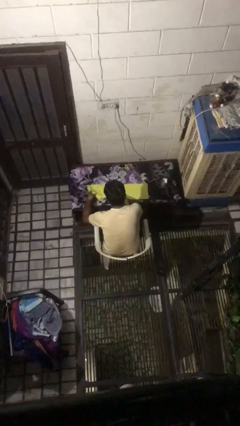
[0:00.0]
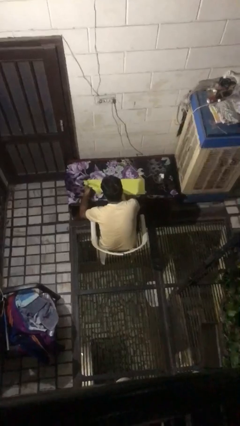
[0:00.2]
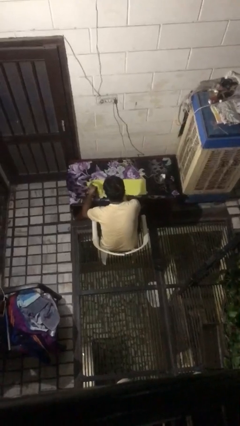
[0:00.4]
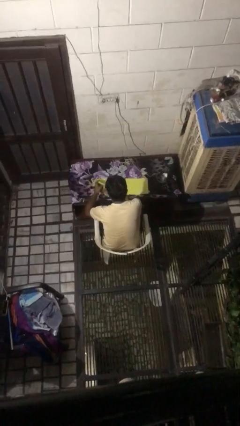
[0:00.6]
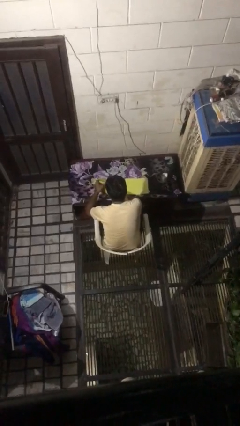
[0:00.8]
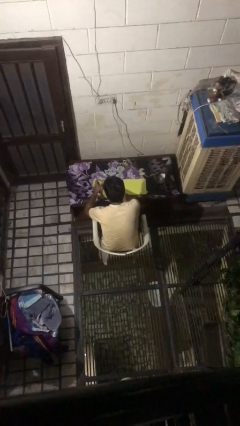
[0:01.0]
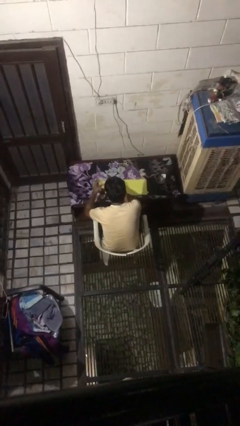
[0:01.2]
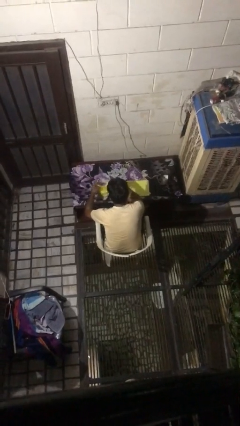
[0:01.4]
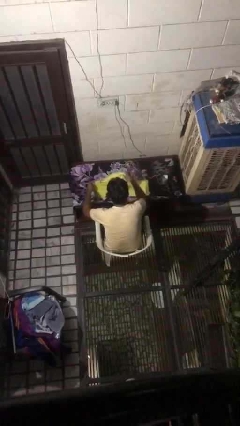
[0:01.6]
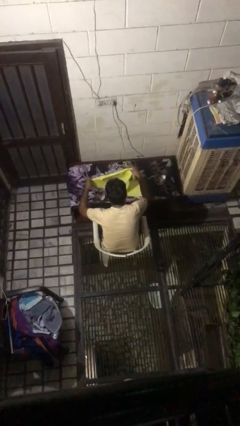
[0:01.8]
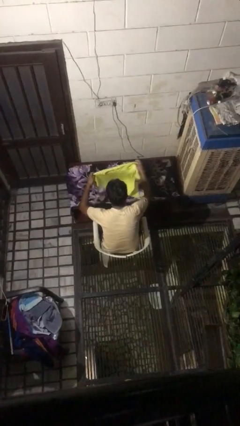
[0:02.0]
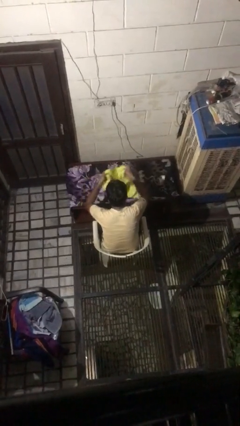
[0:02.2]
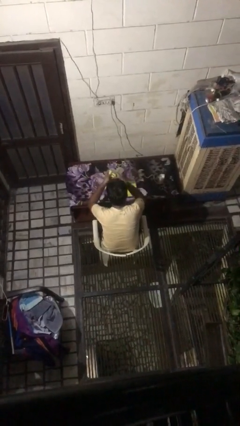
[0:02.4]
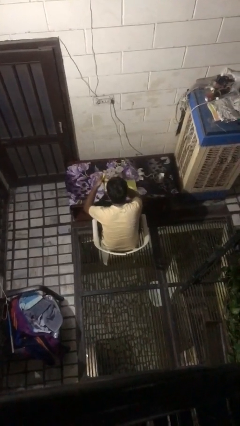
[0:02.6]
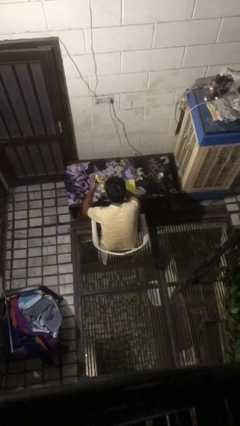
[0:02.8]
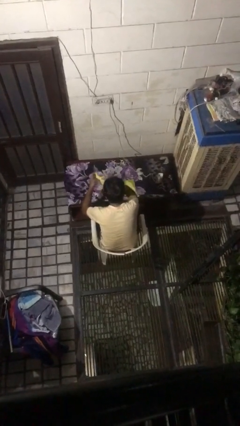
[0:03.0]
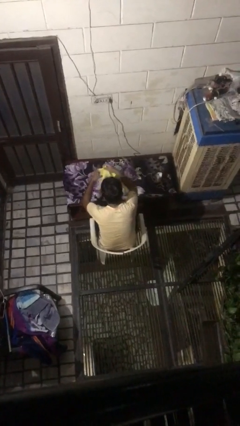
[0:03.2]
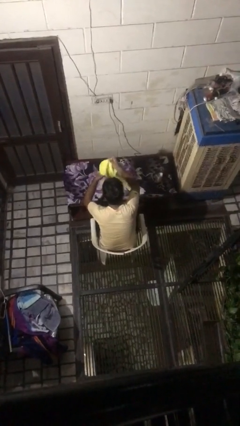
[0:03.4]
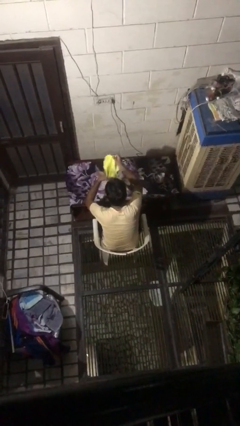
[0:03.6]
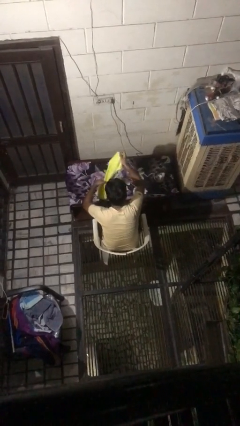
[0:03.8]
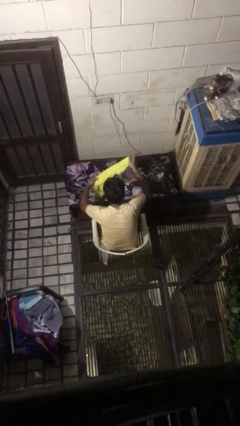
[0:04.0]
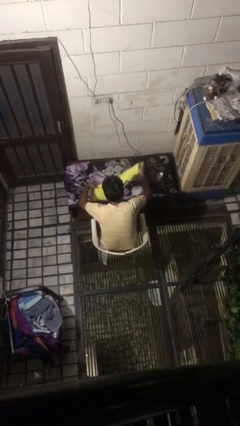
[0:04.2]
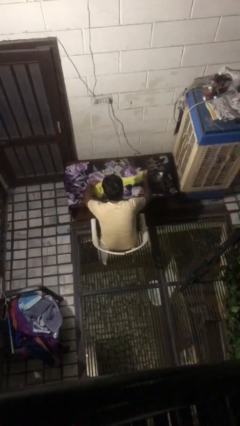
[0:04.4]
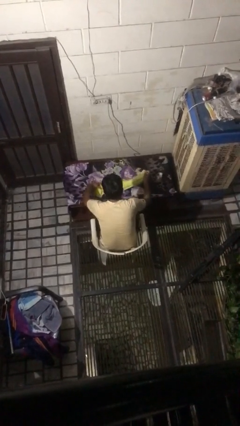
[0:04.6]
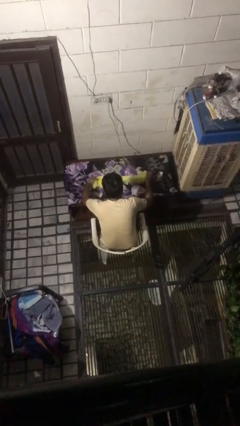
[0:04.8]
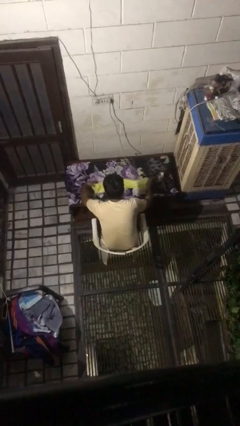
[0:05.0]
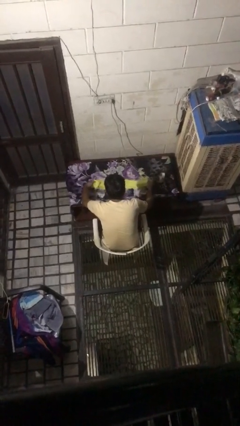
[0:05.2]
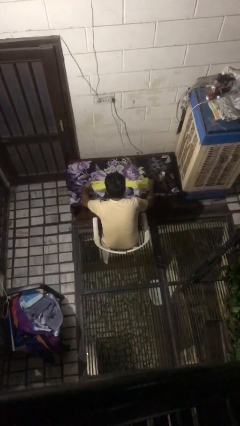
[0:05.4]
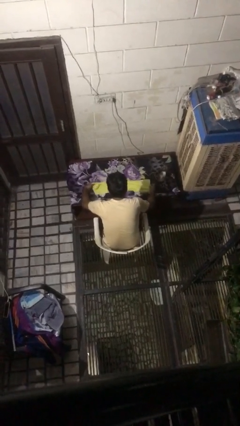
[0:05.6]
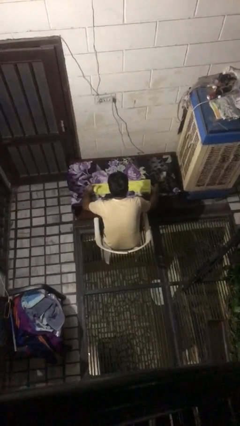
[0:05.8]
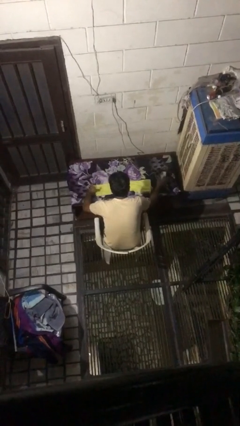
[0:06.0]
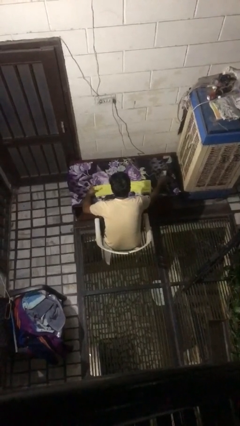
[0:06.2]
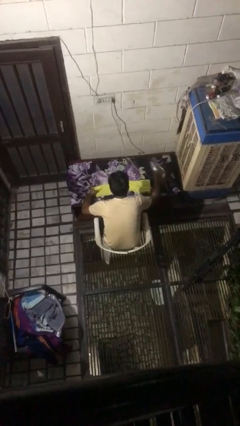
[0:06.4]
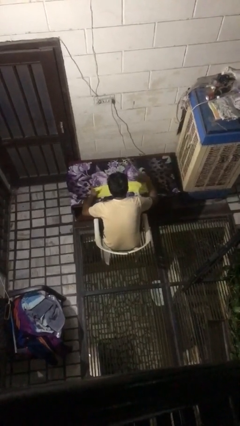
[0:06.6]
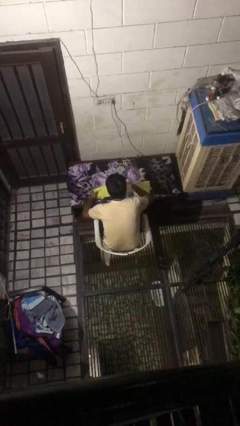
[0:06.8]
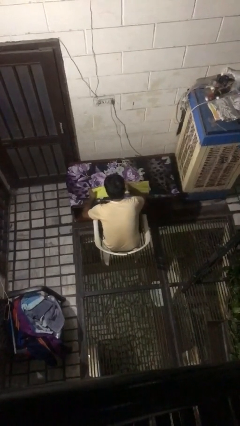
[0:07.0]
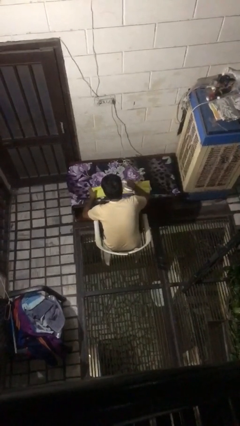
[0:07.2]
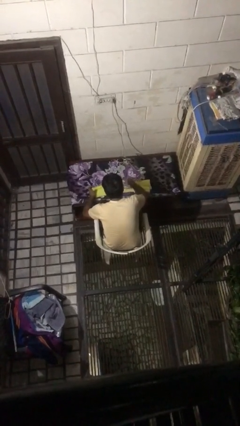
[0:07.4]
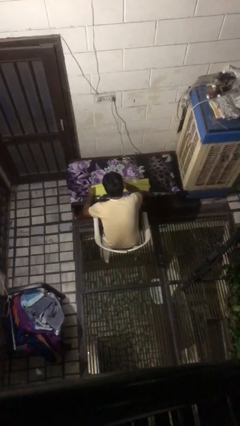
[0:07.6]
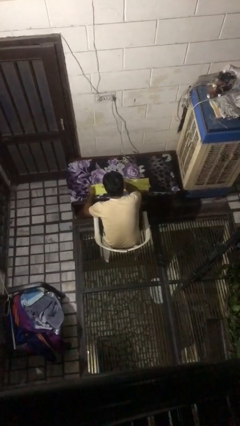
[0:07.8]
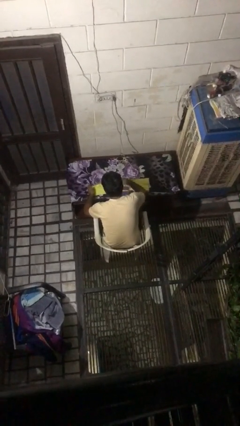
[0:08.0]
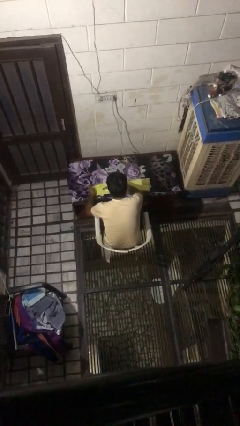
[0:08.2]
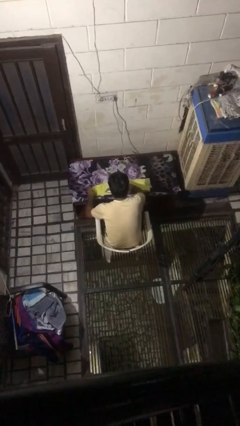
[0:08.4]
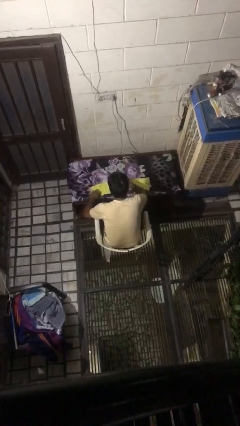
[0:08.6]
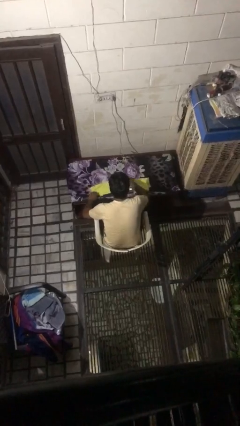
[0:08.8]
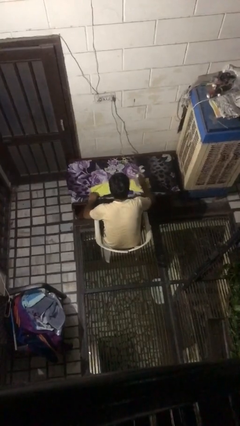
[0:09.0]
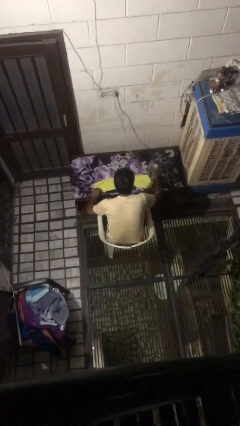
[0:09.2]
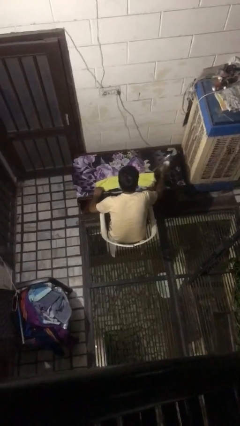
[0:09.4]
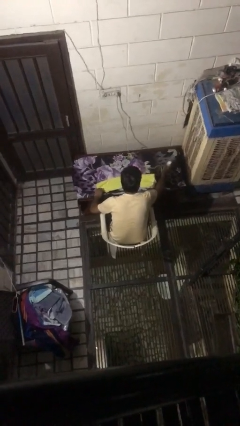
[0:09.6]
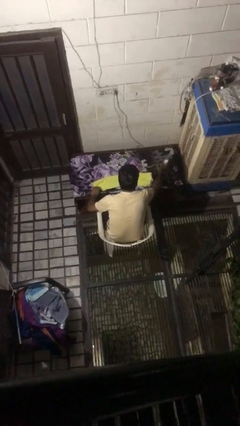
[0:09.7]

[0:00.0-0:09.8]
person irons clothes

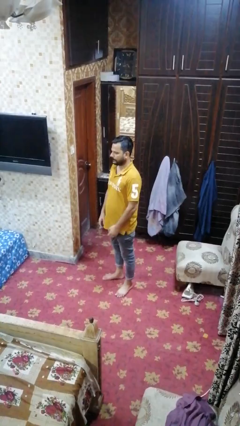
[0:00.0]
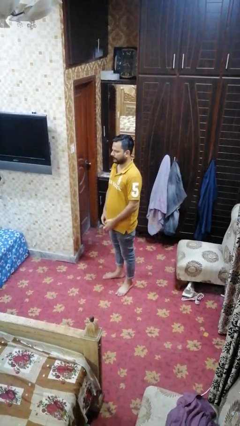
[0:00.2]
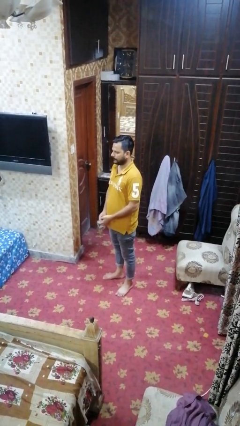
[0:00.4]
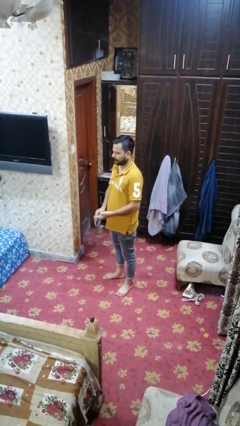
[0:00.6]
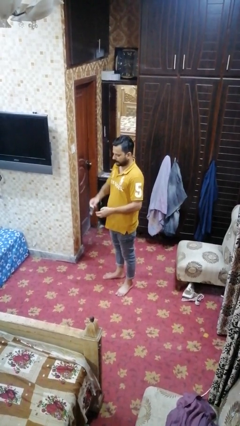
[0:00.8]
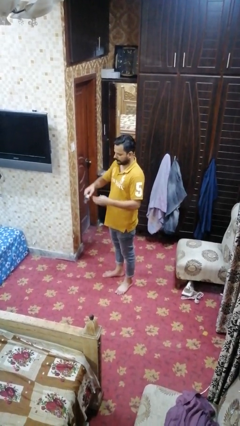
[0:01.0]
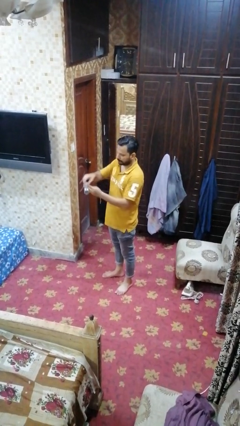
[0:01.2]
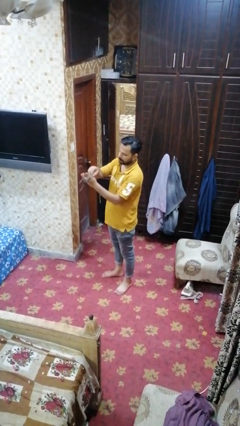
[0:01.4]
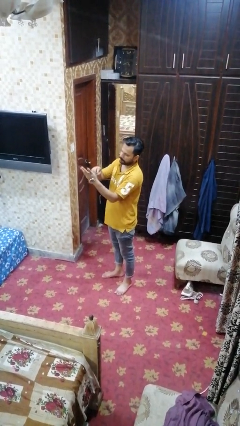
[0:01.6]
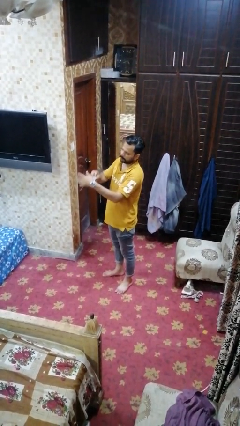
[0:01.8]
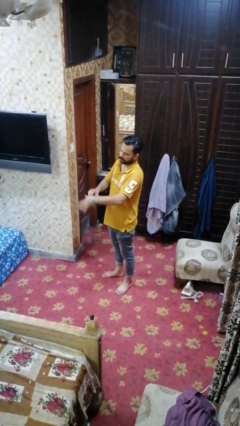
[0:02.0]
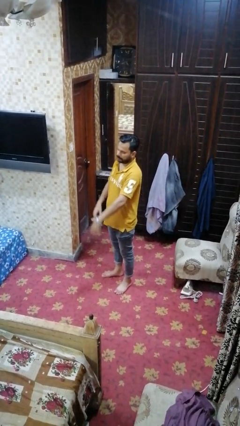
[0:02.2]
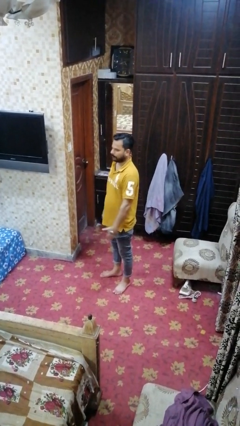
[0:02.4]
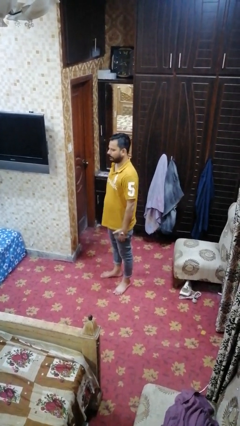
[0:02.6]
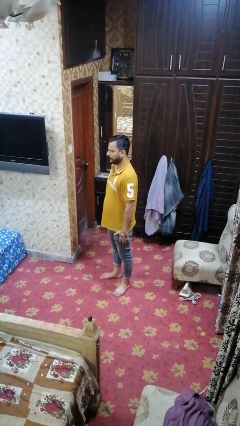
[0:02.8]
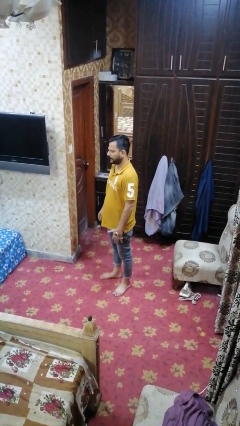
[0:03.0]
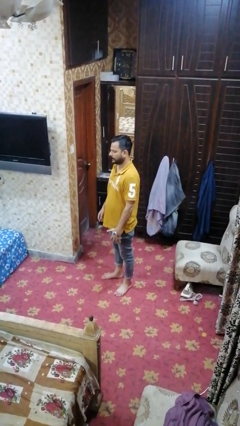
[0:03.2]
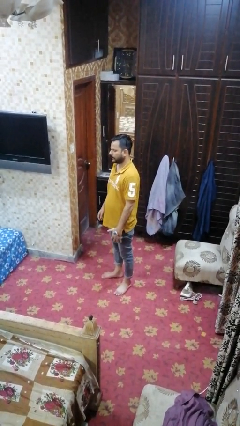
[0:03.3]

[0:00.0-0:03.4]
person puts on wristwatch

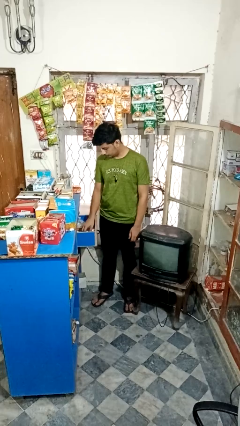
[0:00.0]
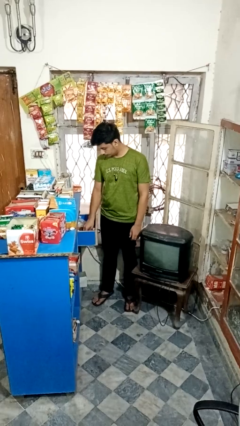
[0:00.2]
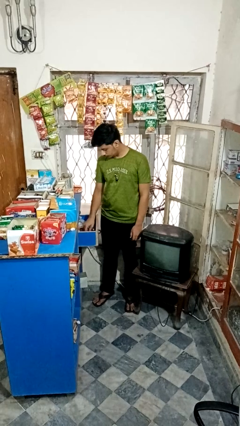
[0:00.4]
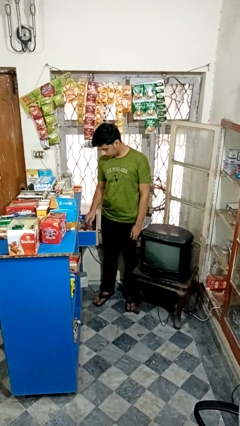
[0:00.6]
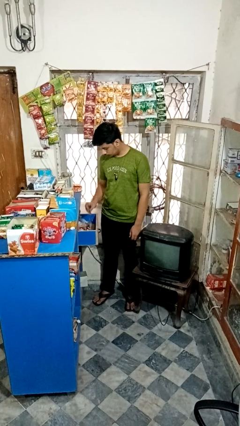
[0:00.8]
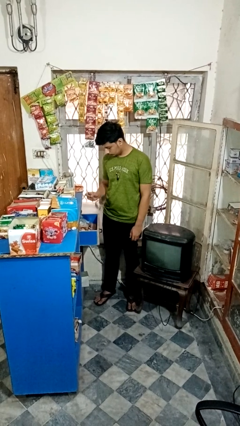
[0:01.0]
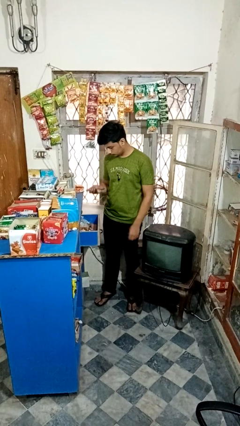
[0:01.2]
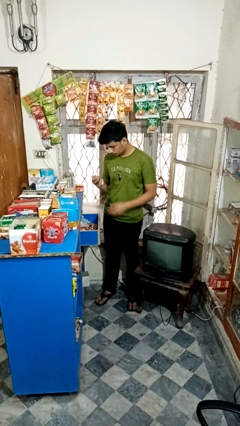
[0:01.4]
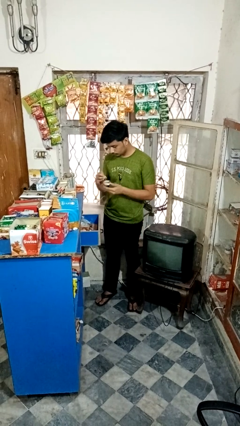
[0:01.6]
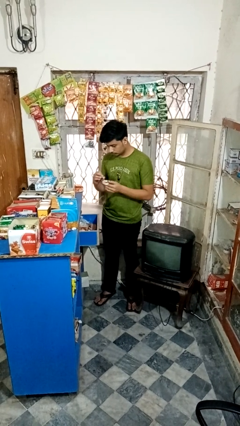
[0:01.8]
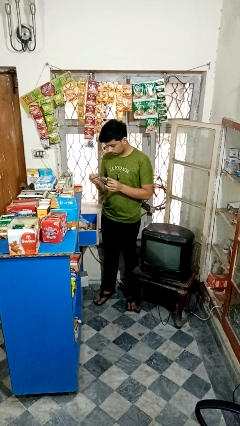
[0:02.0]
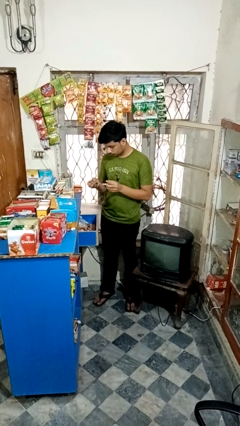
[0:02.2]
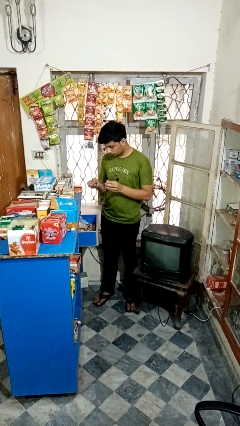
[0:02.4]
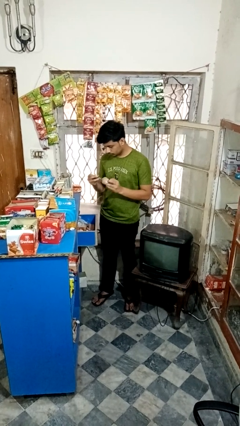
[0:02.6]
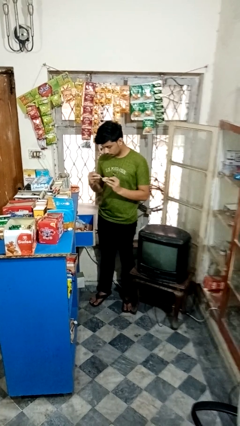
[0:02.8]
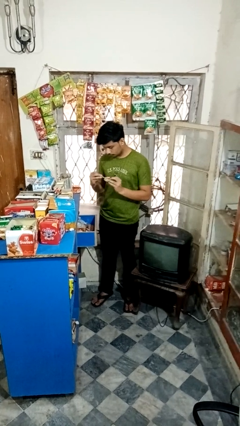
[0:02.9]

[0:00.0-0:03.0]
person searches in kitchen drawer

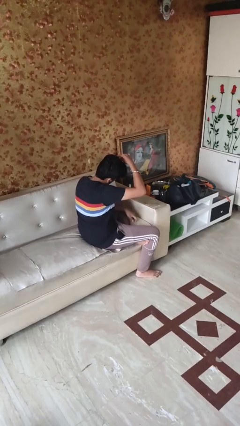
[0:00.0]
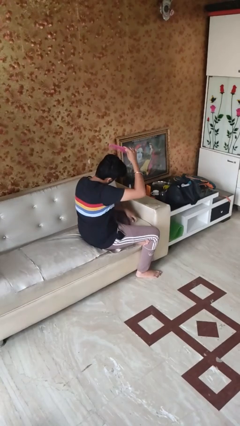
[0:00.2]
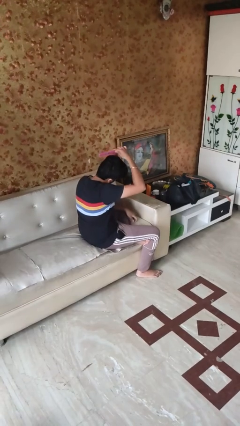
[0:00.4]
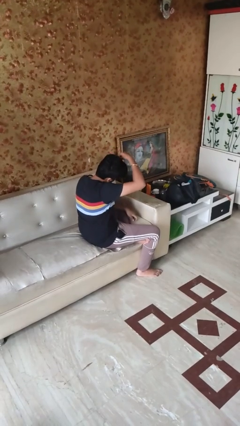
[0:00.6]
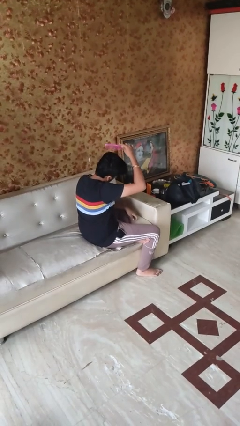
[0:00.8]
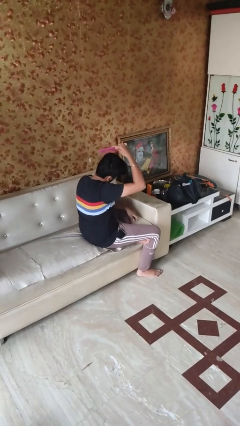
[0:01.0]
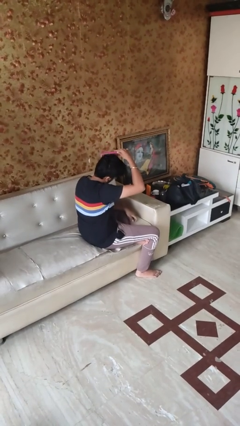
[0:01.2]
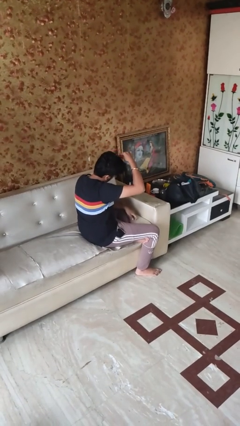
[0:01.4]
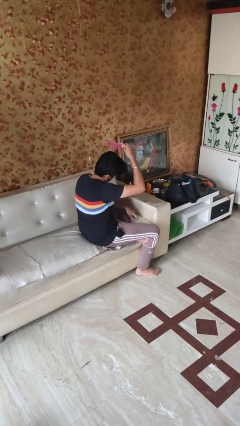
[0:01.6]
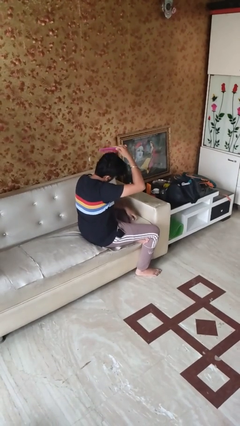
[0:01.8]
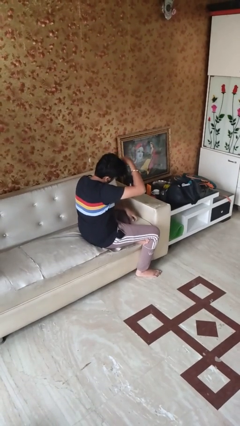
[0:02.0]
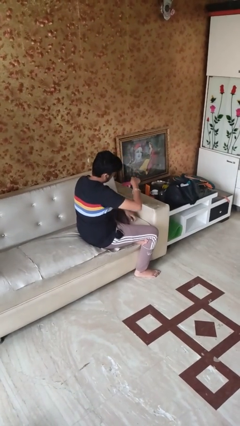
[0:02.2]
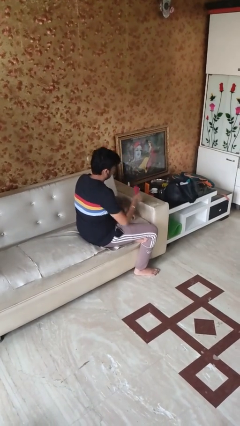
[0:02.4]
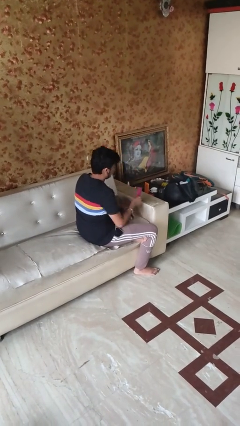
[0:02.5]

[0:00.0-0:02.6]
person brushes hair
